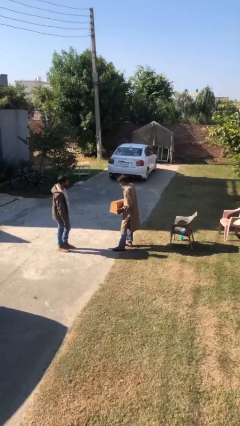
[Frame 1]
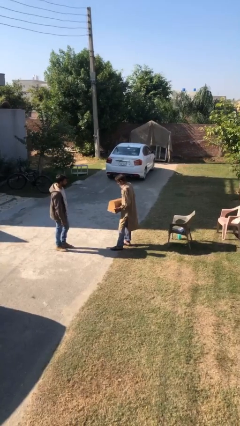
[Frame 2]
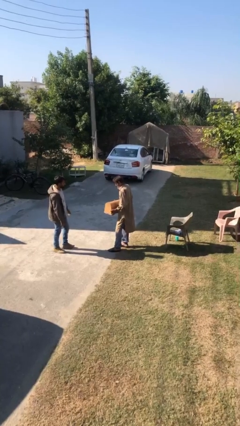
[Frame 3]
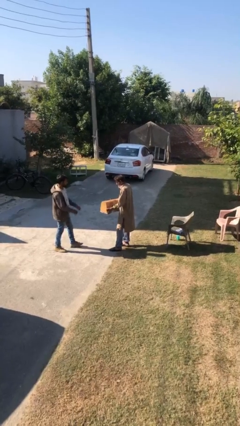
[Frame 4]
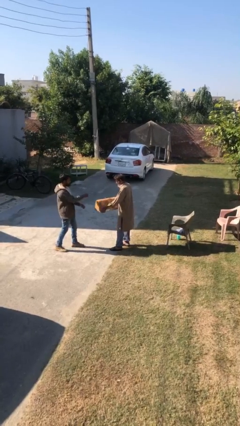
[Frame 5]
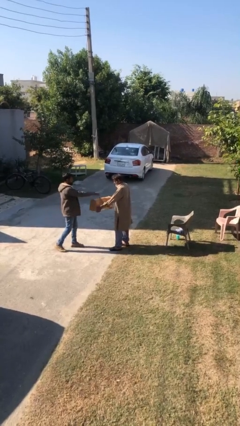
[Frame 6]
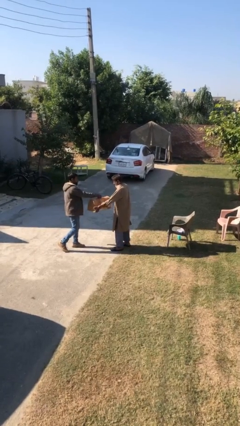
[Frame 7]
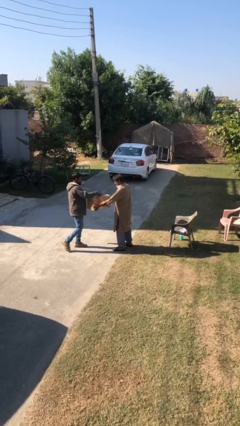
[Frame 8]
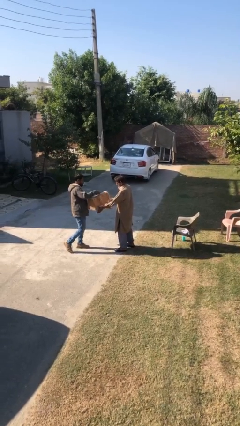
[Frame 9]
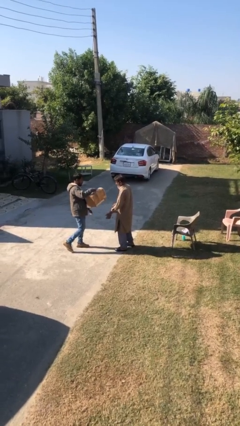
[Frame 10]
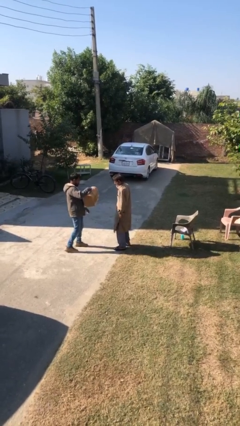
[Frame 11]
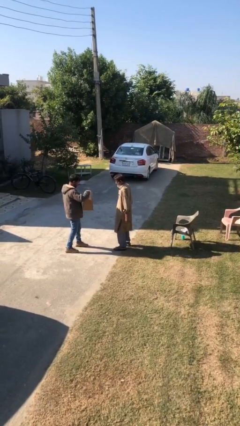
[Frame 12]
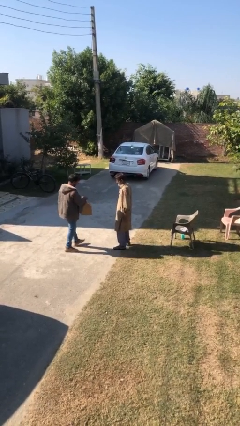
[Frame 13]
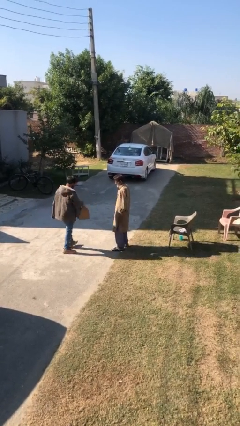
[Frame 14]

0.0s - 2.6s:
person transfers object to person

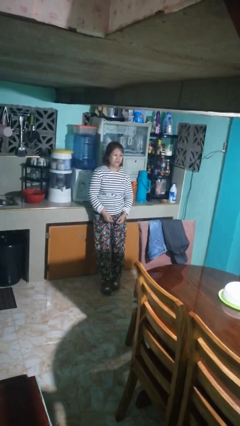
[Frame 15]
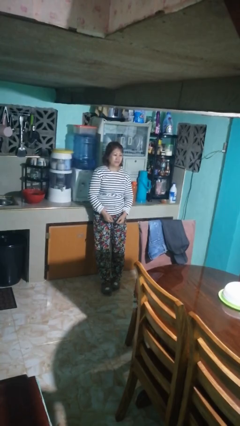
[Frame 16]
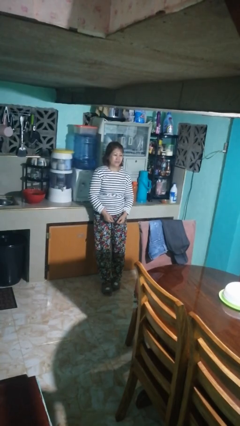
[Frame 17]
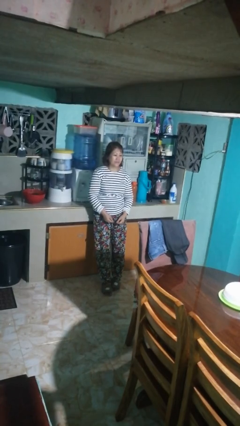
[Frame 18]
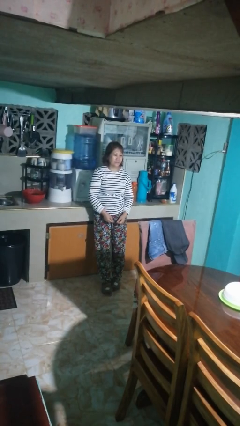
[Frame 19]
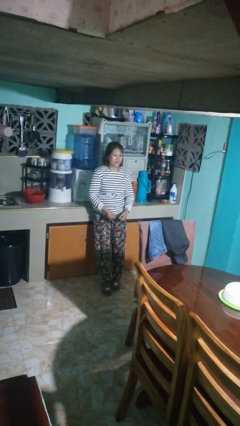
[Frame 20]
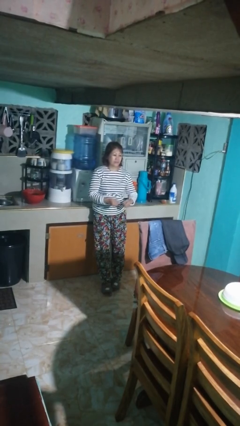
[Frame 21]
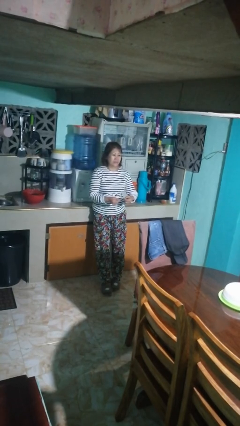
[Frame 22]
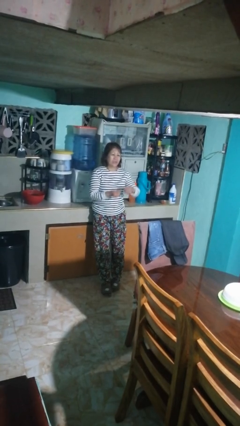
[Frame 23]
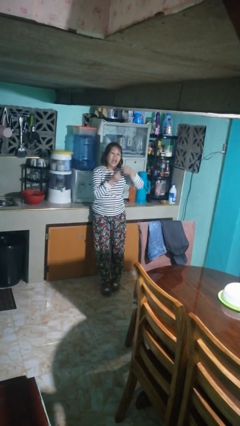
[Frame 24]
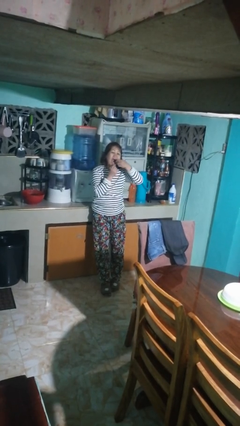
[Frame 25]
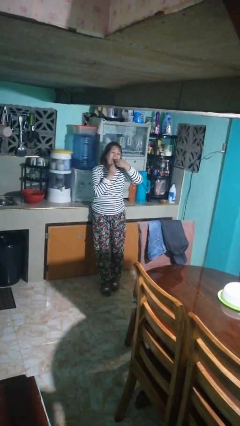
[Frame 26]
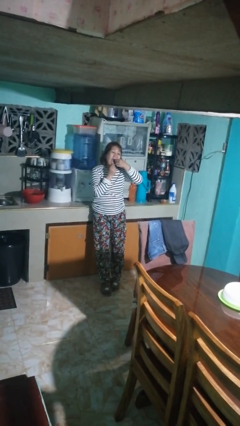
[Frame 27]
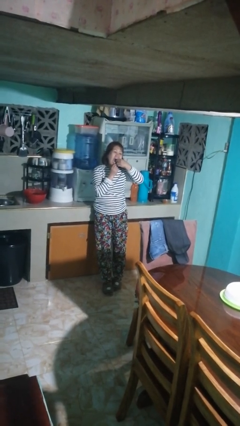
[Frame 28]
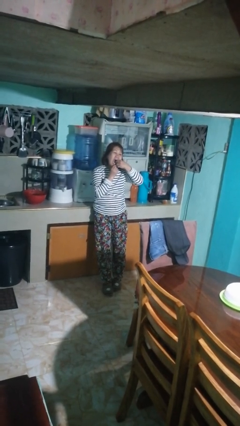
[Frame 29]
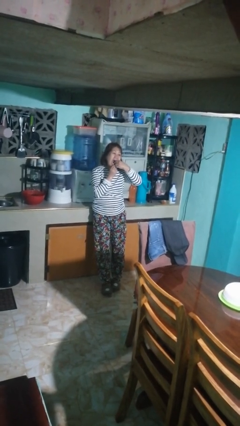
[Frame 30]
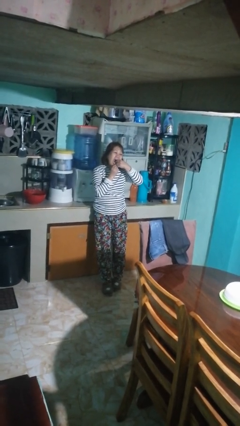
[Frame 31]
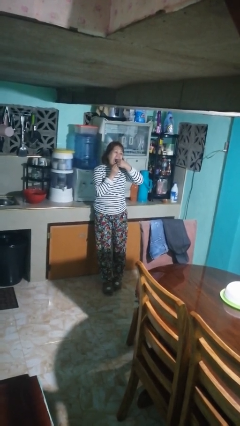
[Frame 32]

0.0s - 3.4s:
person flosses

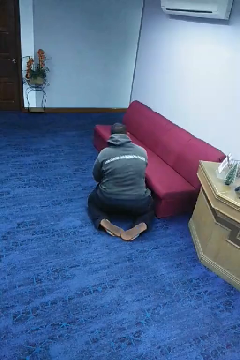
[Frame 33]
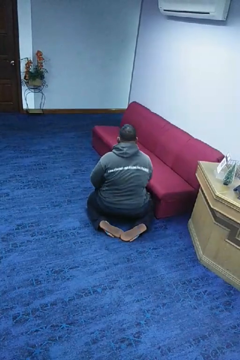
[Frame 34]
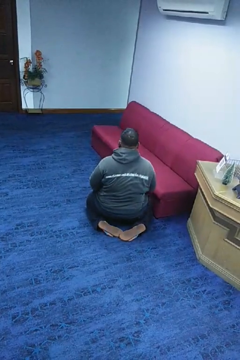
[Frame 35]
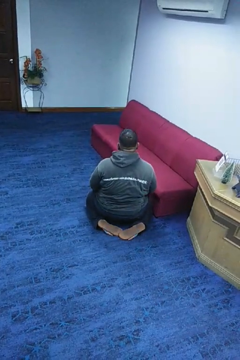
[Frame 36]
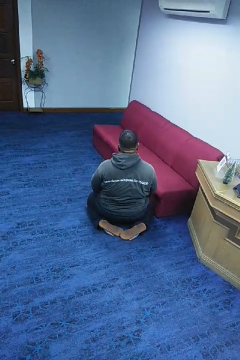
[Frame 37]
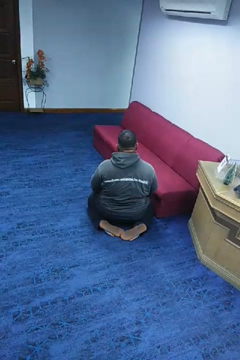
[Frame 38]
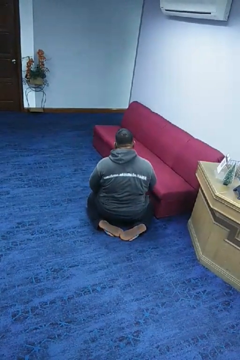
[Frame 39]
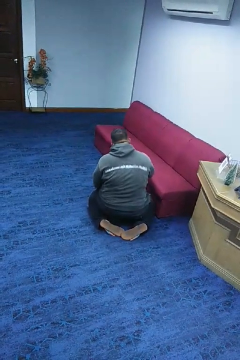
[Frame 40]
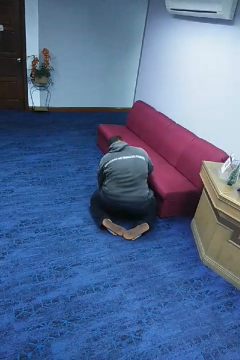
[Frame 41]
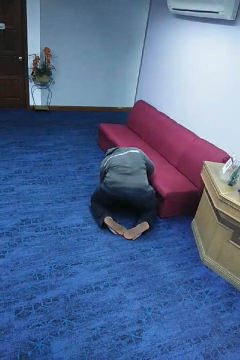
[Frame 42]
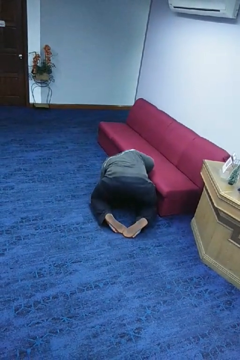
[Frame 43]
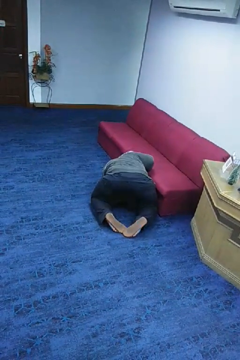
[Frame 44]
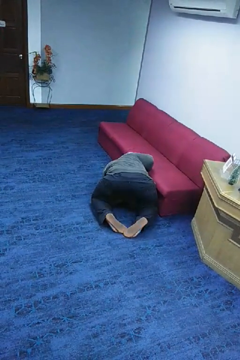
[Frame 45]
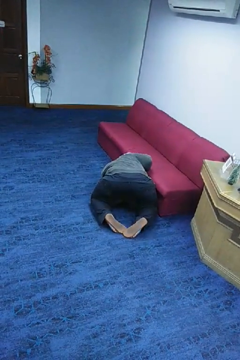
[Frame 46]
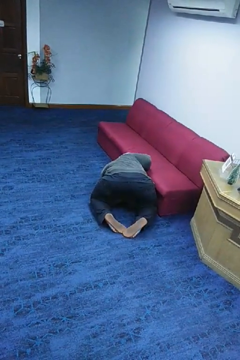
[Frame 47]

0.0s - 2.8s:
person searches under couch

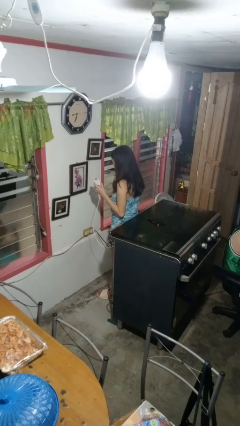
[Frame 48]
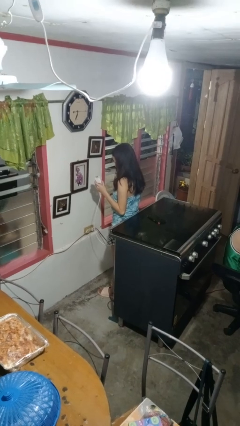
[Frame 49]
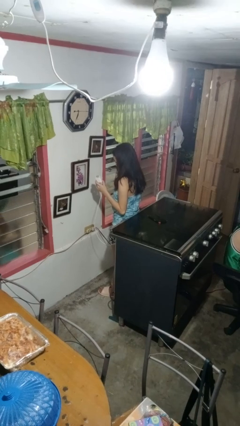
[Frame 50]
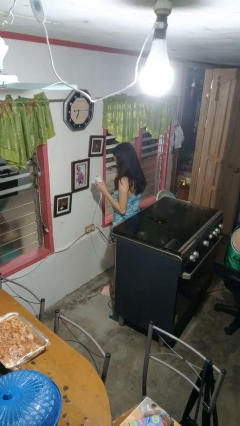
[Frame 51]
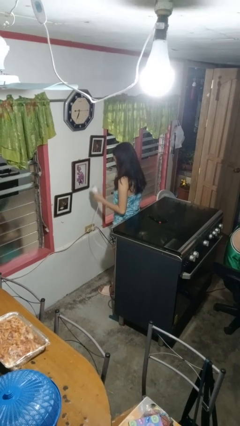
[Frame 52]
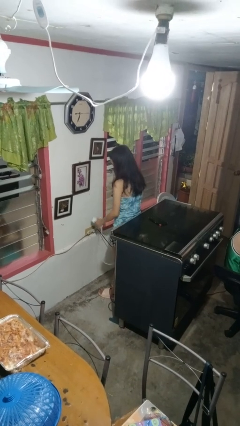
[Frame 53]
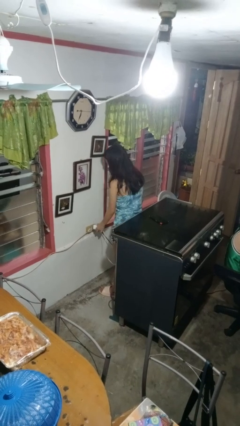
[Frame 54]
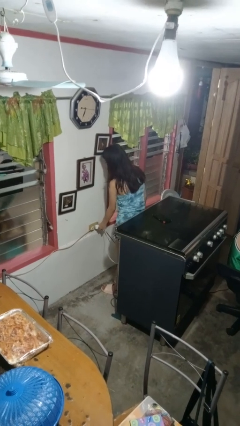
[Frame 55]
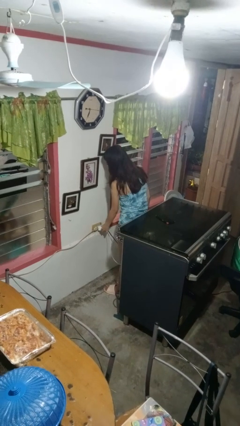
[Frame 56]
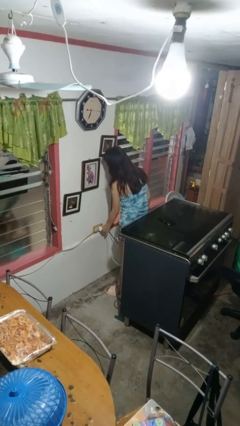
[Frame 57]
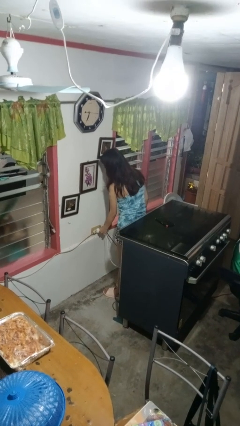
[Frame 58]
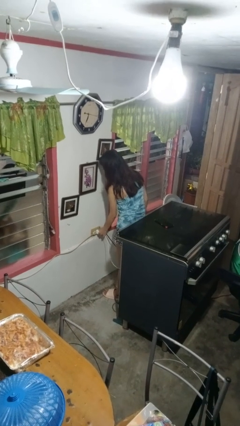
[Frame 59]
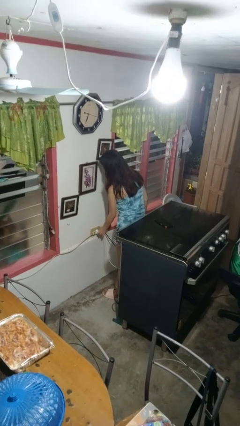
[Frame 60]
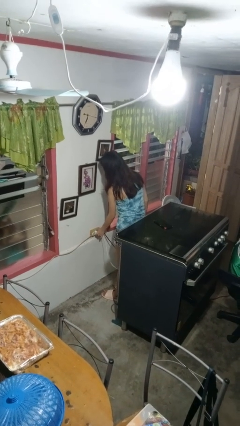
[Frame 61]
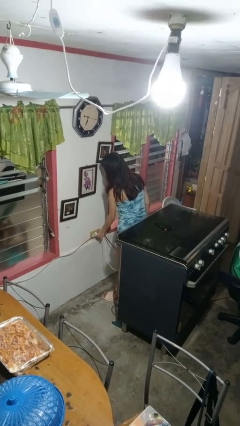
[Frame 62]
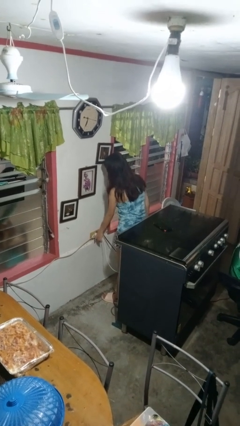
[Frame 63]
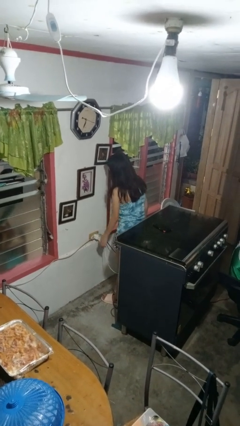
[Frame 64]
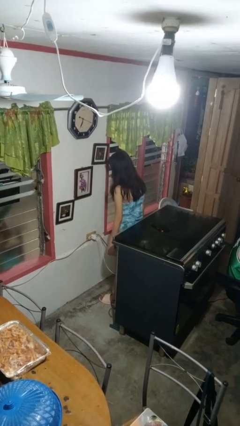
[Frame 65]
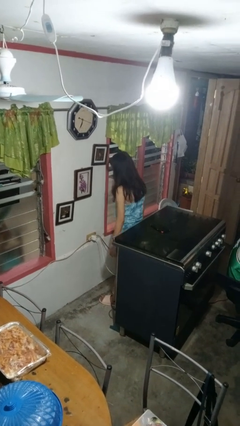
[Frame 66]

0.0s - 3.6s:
person plugs into electrical socket

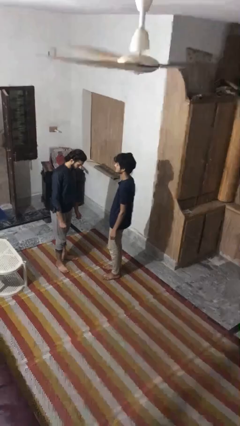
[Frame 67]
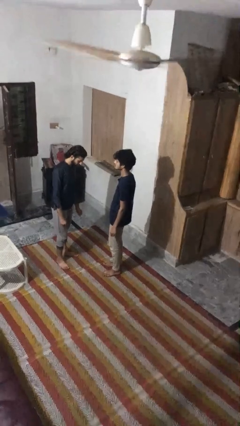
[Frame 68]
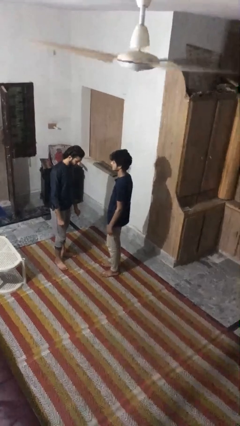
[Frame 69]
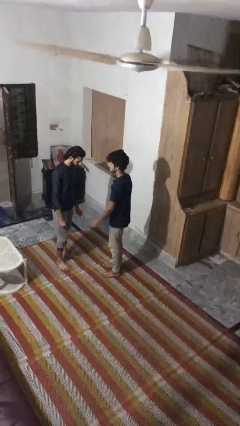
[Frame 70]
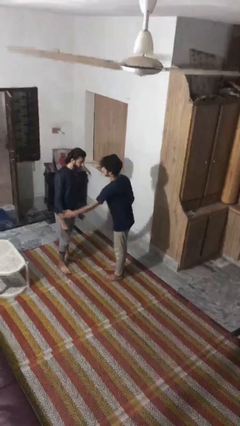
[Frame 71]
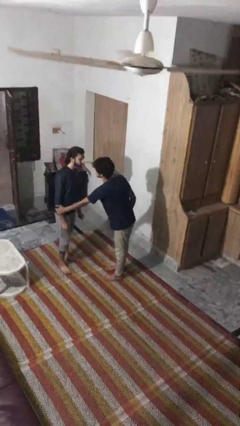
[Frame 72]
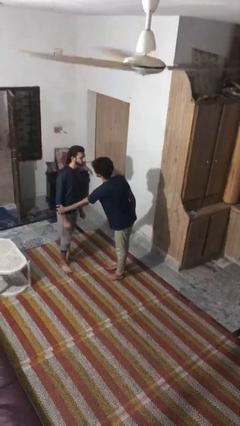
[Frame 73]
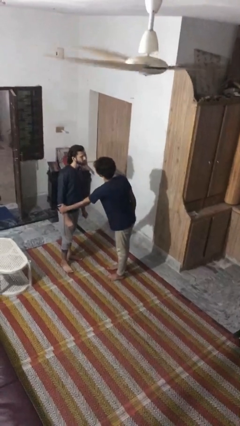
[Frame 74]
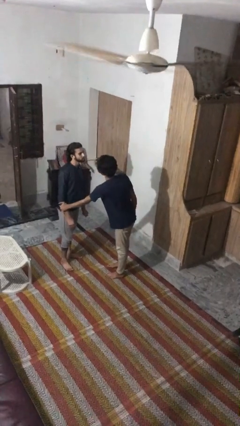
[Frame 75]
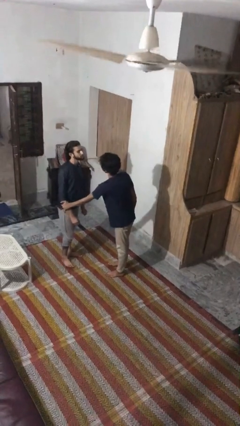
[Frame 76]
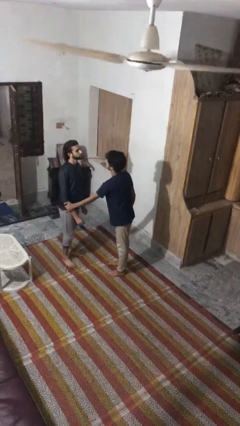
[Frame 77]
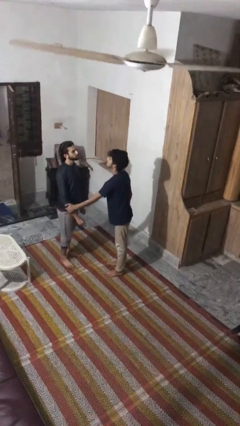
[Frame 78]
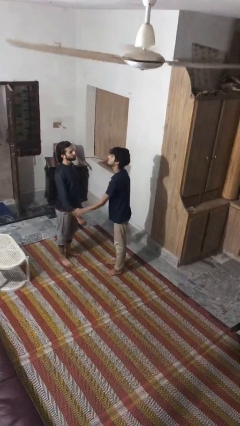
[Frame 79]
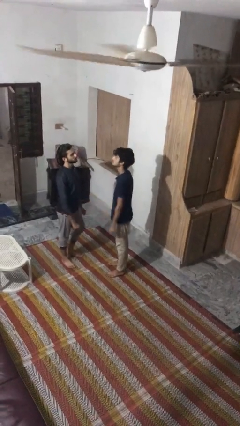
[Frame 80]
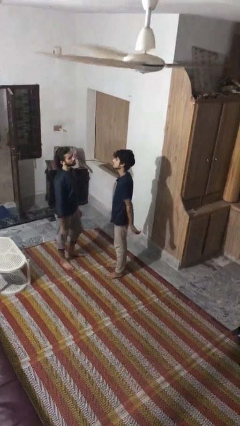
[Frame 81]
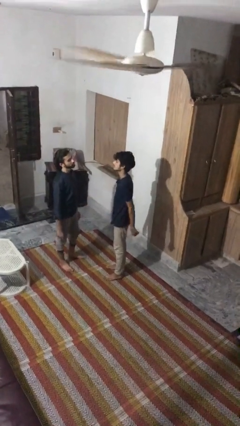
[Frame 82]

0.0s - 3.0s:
person grabs person by forearm

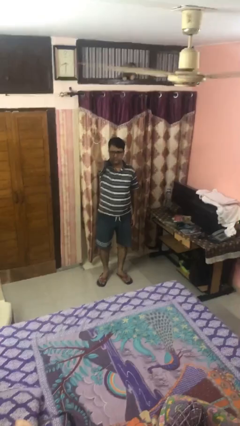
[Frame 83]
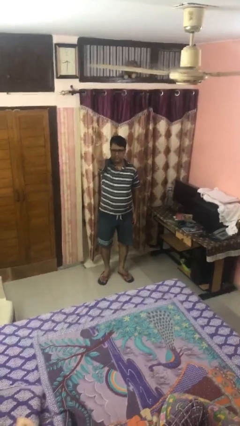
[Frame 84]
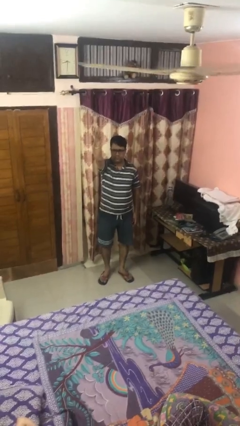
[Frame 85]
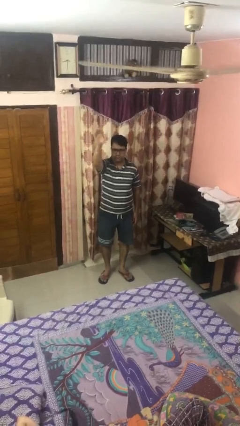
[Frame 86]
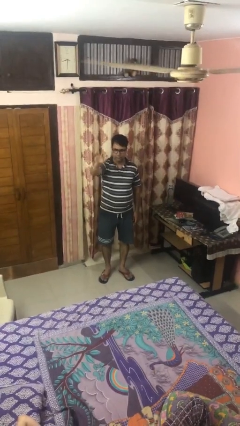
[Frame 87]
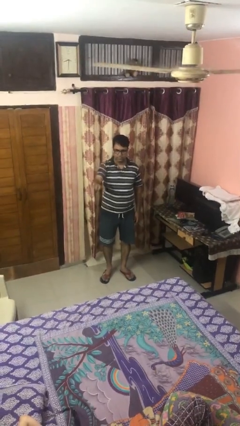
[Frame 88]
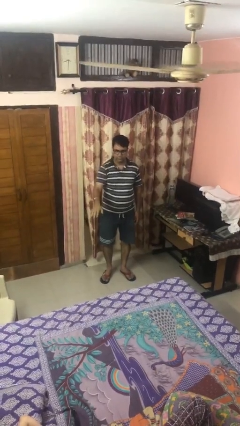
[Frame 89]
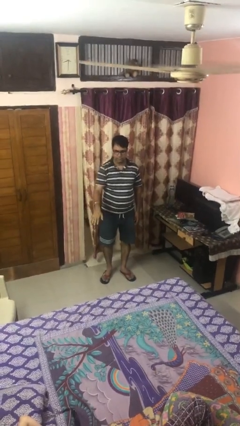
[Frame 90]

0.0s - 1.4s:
person gestures swipe down

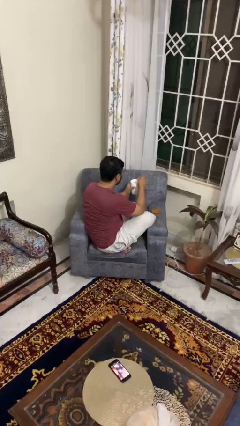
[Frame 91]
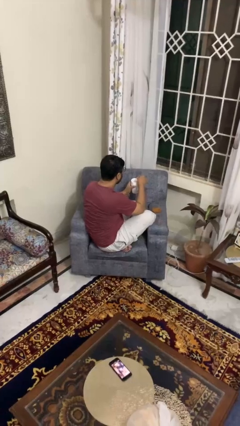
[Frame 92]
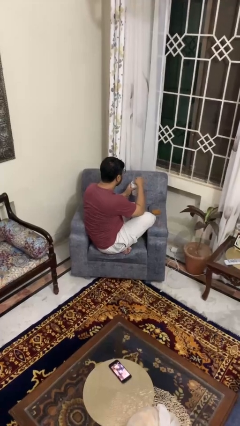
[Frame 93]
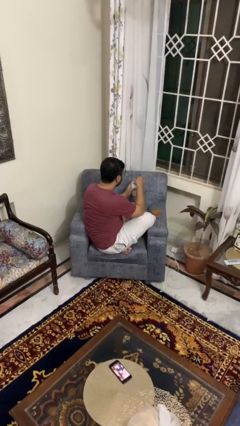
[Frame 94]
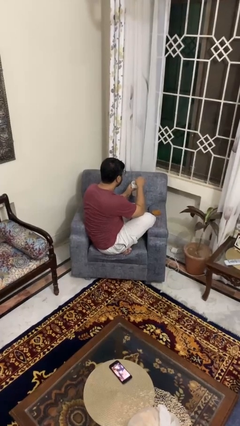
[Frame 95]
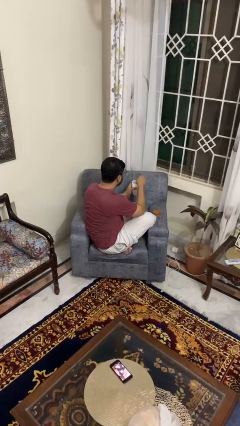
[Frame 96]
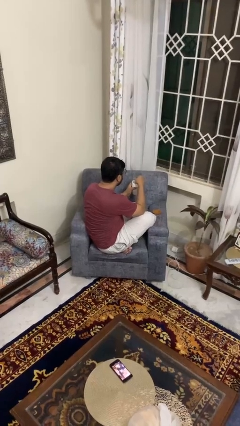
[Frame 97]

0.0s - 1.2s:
person stirs mug

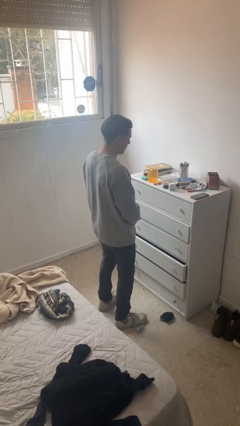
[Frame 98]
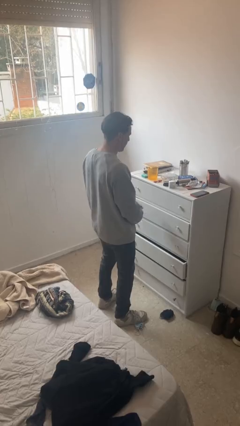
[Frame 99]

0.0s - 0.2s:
person opens dresser drawer
